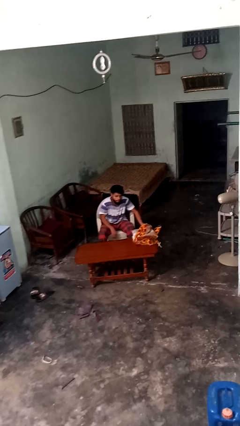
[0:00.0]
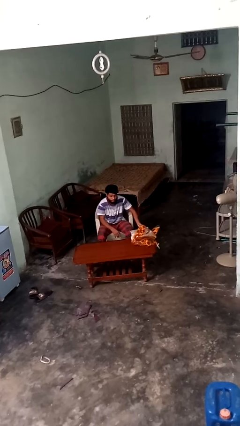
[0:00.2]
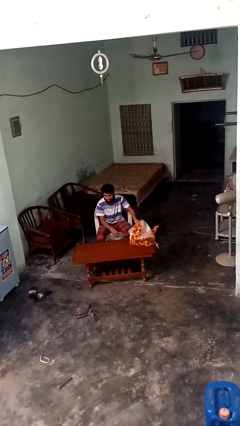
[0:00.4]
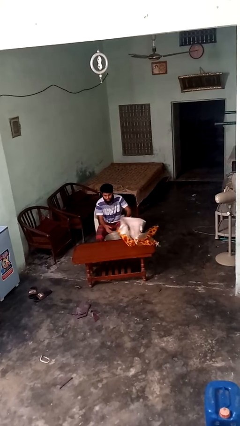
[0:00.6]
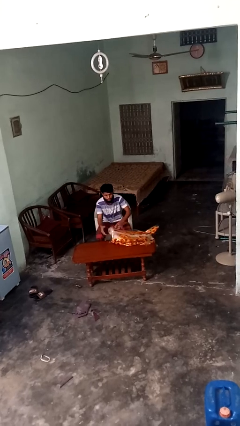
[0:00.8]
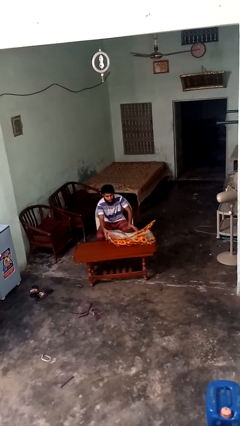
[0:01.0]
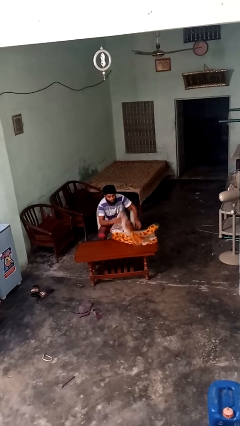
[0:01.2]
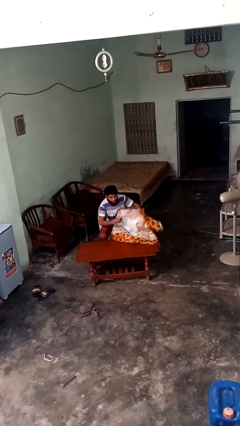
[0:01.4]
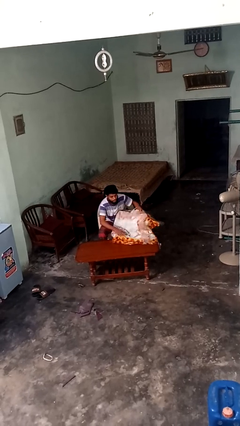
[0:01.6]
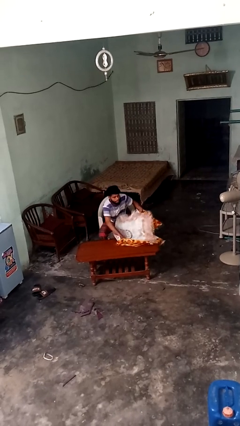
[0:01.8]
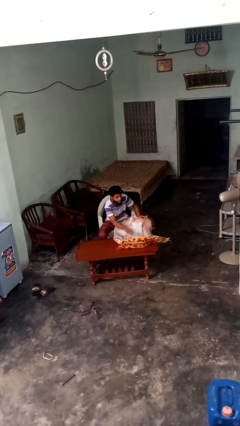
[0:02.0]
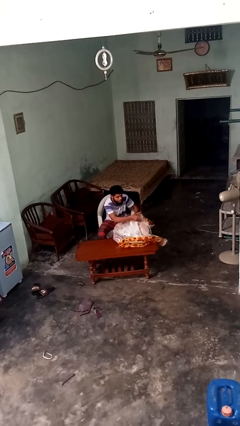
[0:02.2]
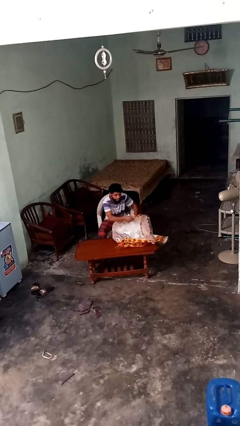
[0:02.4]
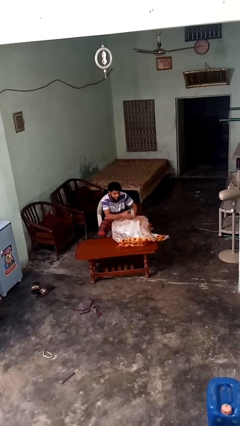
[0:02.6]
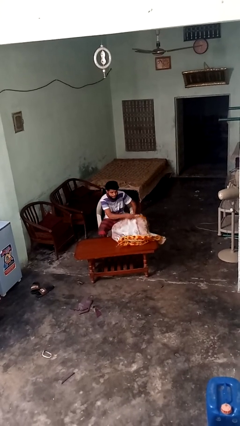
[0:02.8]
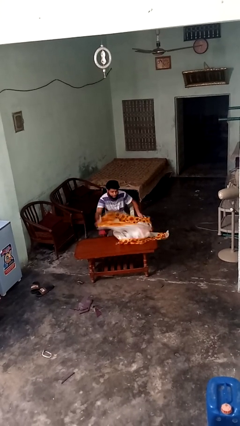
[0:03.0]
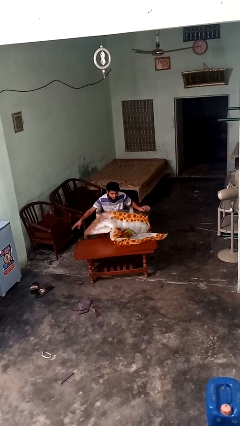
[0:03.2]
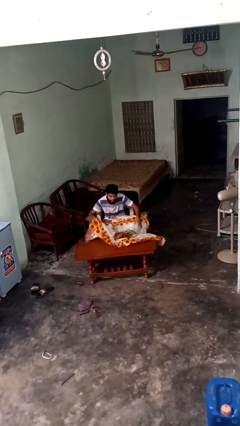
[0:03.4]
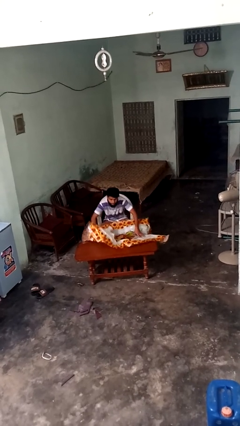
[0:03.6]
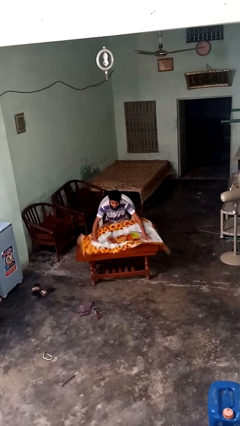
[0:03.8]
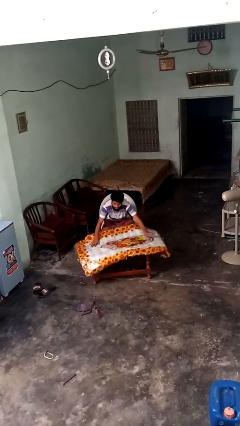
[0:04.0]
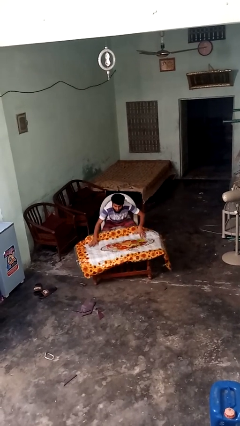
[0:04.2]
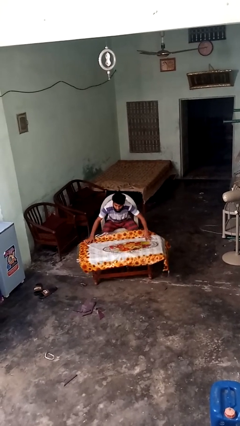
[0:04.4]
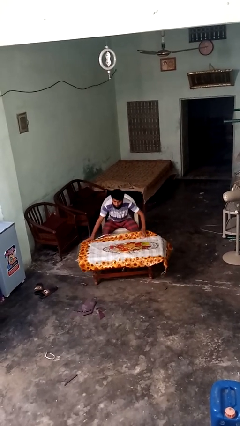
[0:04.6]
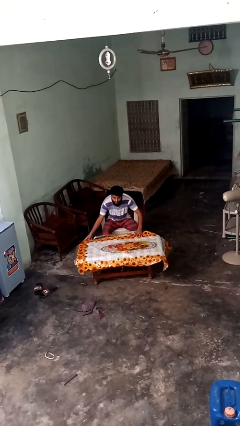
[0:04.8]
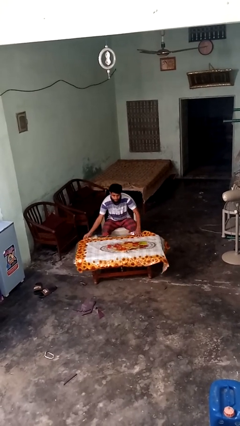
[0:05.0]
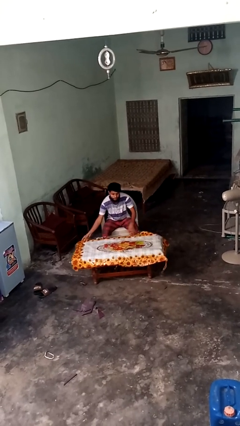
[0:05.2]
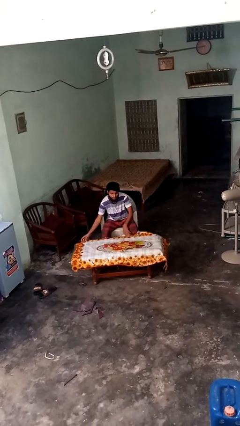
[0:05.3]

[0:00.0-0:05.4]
person spreads tablecloth

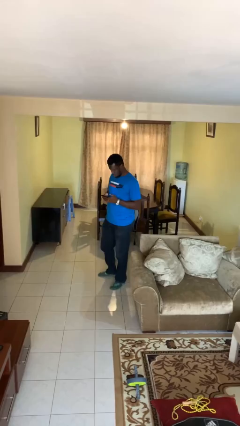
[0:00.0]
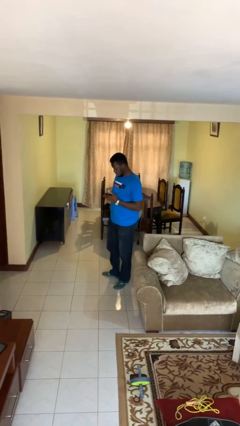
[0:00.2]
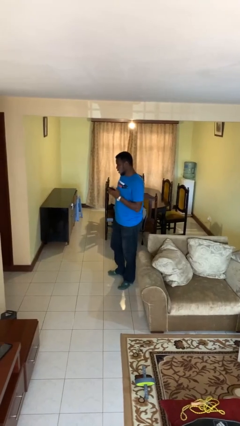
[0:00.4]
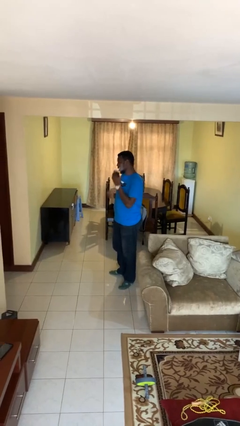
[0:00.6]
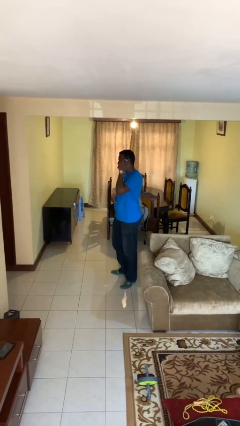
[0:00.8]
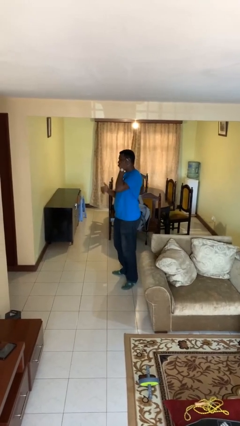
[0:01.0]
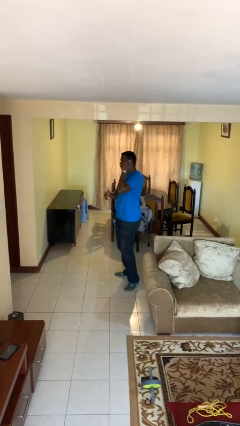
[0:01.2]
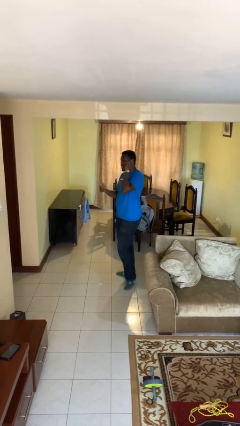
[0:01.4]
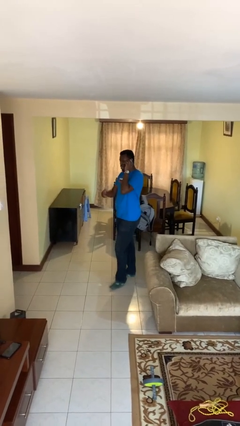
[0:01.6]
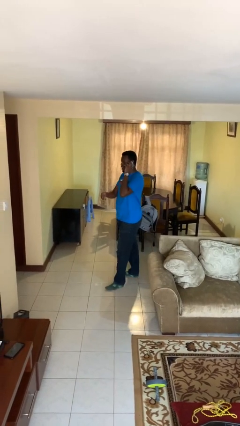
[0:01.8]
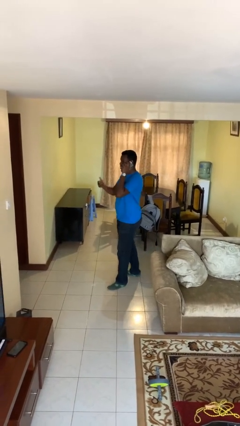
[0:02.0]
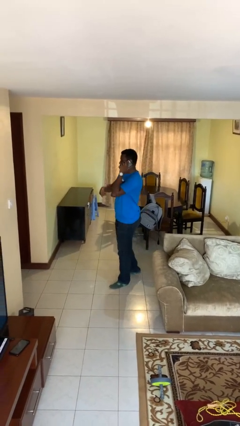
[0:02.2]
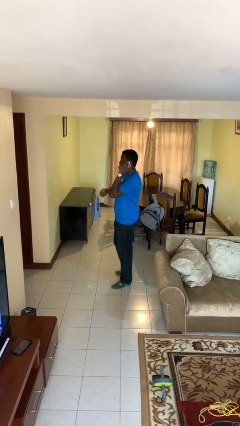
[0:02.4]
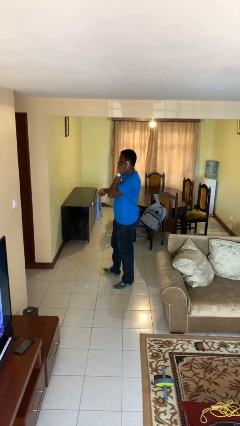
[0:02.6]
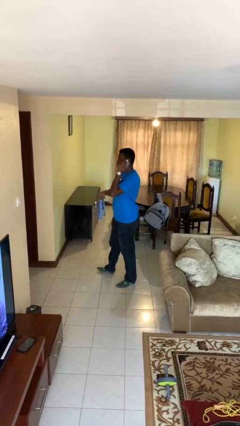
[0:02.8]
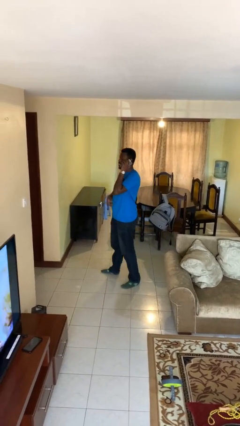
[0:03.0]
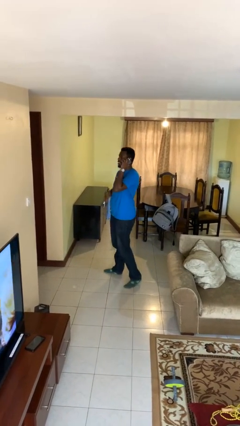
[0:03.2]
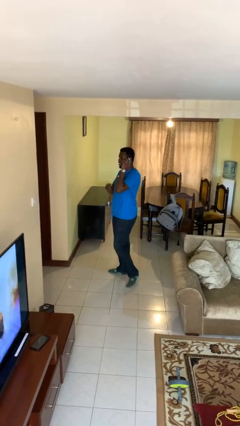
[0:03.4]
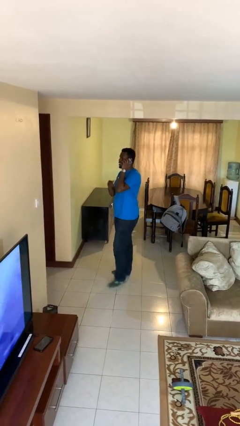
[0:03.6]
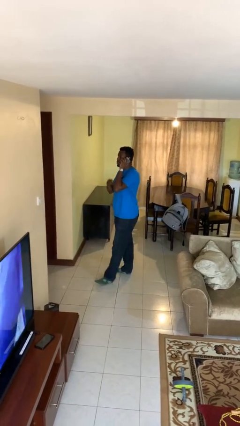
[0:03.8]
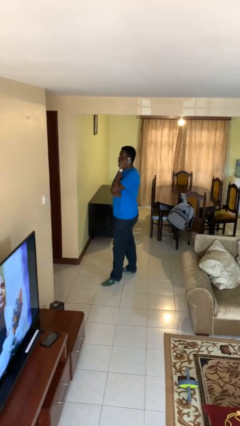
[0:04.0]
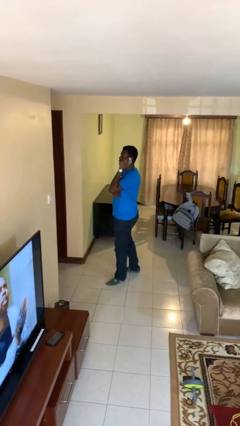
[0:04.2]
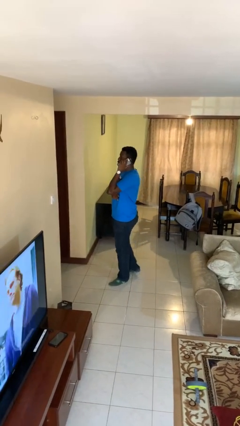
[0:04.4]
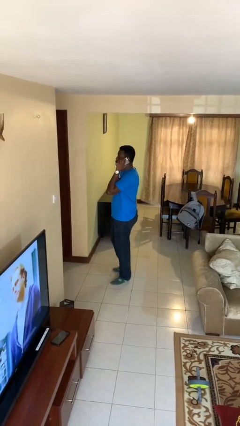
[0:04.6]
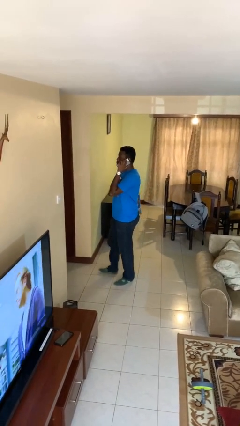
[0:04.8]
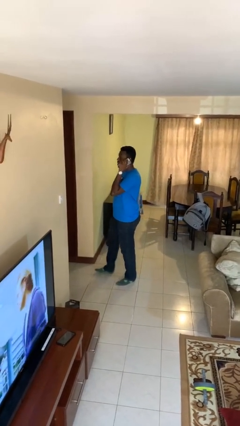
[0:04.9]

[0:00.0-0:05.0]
person talks on phone

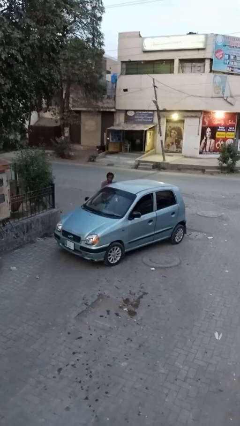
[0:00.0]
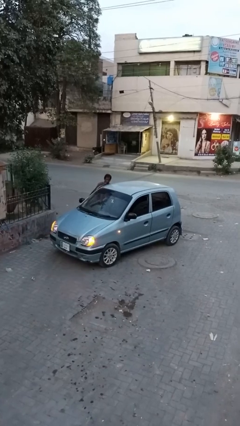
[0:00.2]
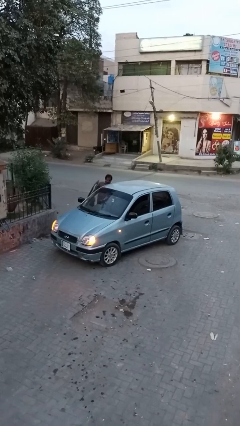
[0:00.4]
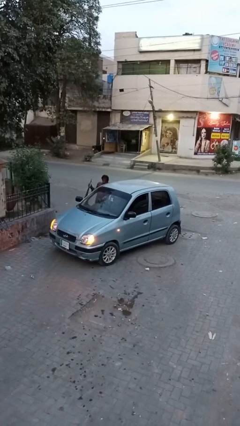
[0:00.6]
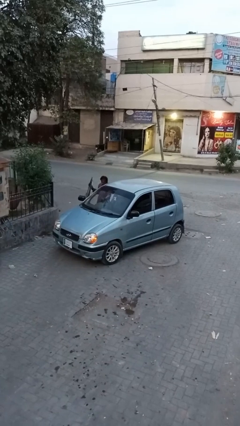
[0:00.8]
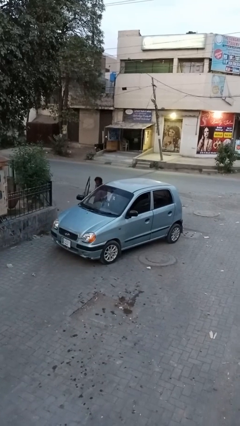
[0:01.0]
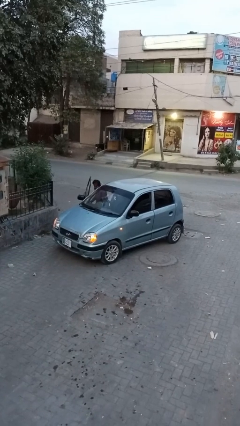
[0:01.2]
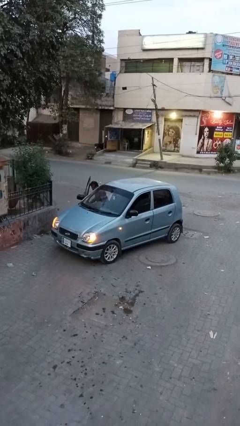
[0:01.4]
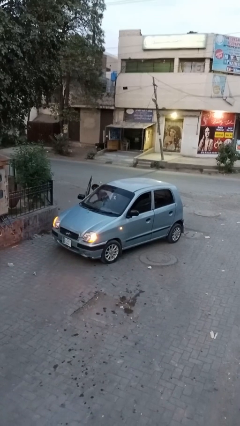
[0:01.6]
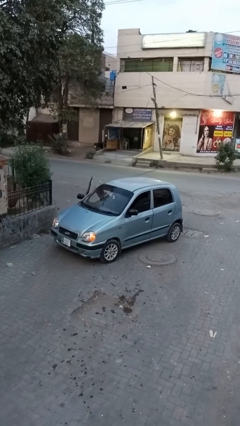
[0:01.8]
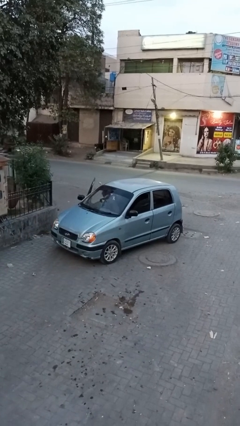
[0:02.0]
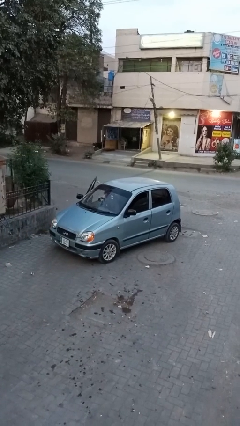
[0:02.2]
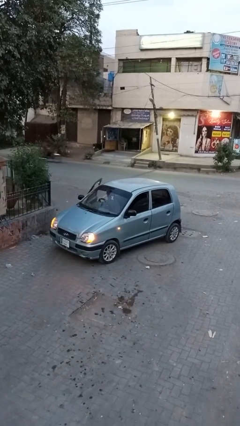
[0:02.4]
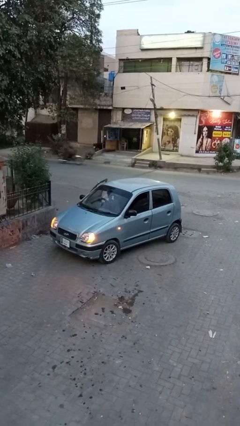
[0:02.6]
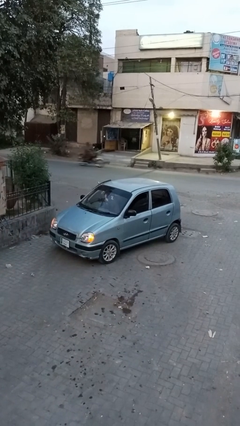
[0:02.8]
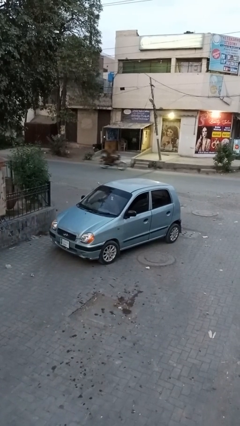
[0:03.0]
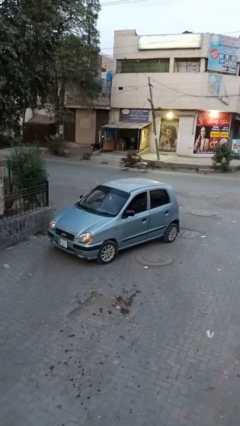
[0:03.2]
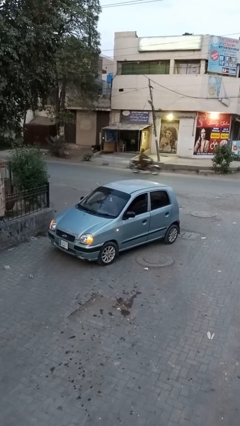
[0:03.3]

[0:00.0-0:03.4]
car picks up person

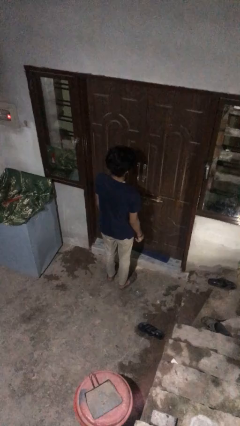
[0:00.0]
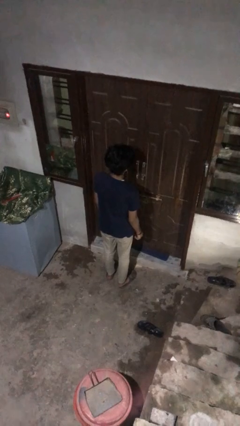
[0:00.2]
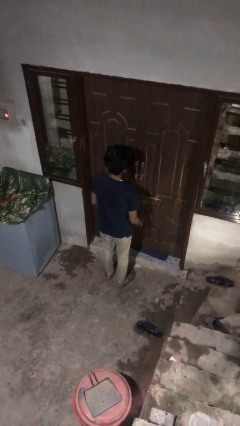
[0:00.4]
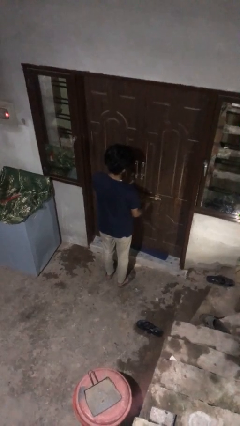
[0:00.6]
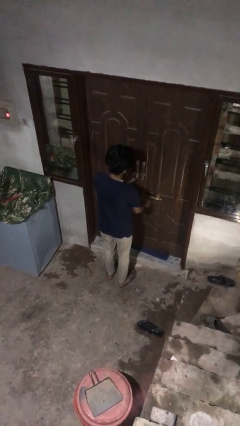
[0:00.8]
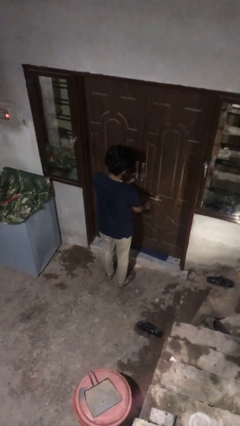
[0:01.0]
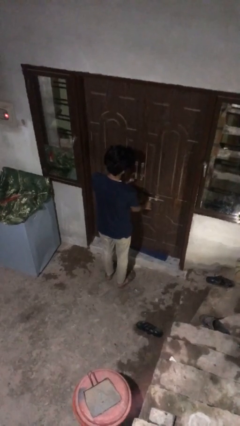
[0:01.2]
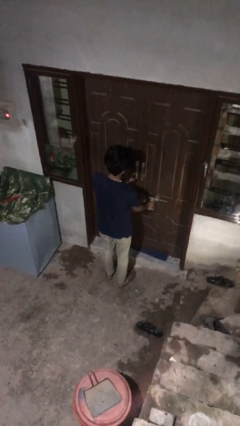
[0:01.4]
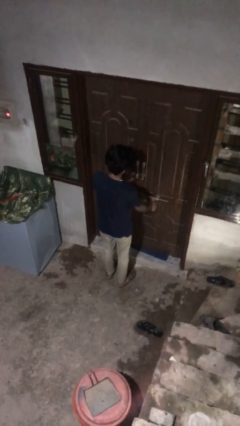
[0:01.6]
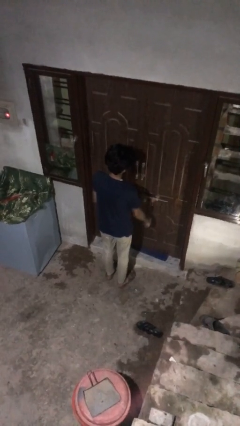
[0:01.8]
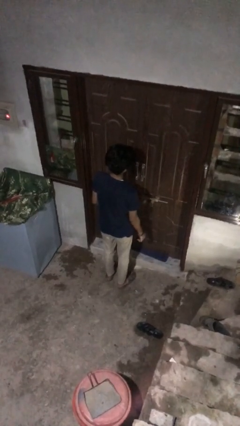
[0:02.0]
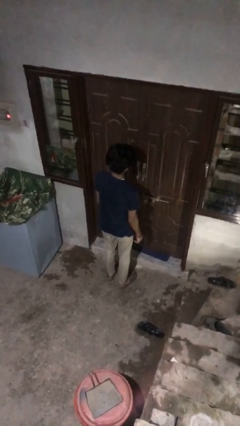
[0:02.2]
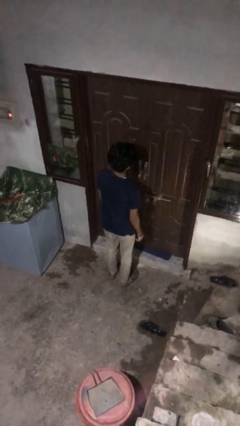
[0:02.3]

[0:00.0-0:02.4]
person unlocks door with keys

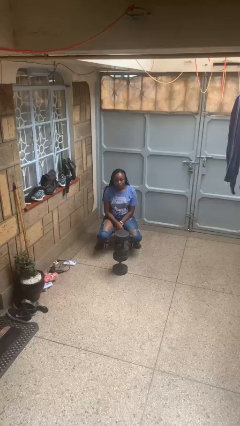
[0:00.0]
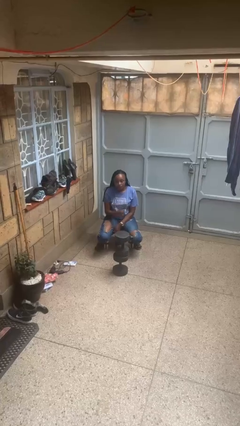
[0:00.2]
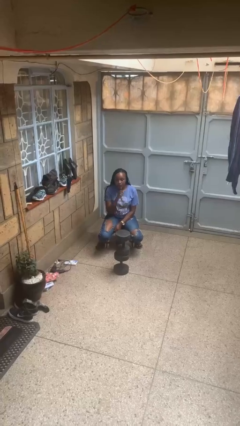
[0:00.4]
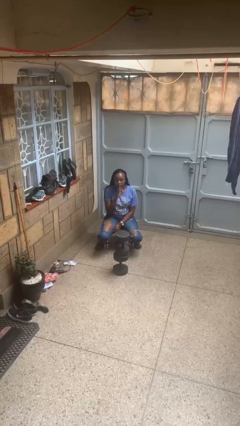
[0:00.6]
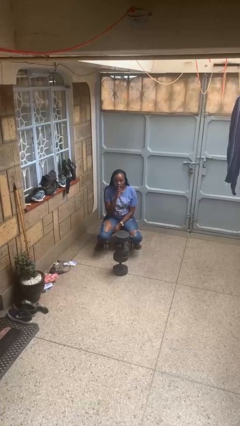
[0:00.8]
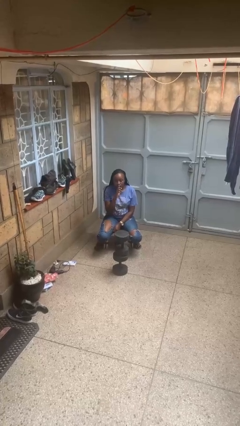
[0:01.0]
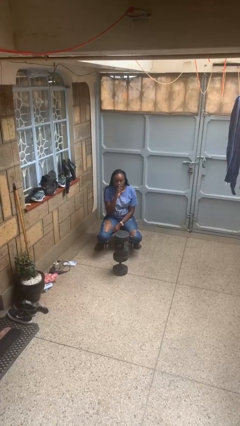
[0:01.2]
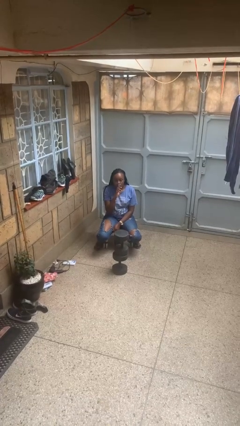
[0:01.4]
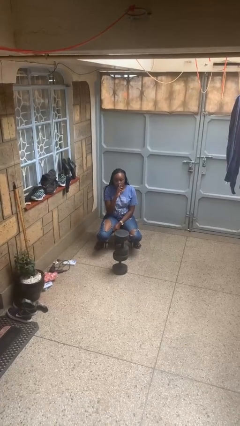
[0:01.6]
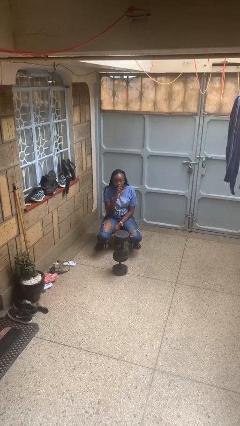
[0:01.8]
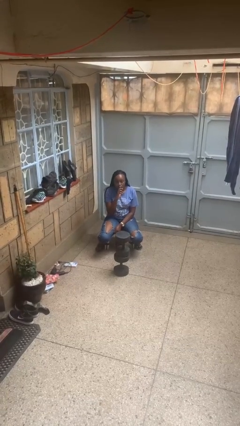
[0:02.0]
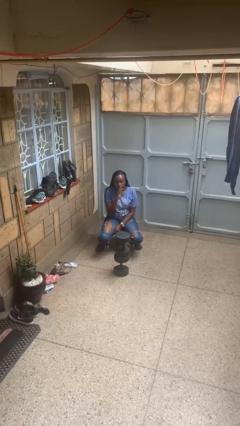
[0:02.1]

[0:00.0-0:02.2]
person gestures be quiet
